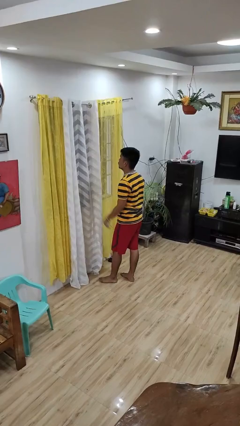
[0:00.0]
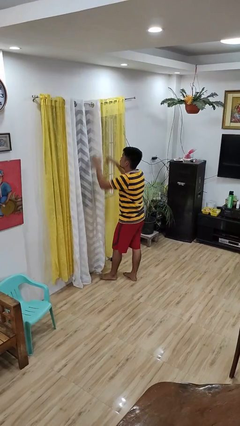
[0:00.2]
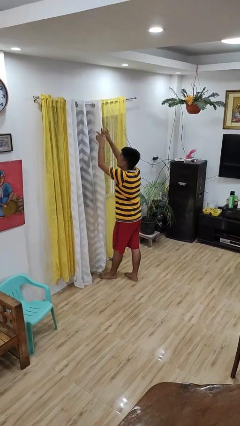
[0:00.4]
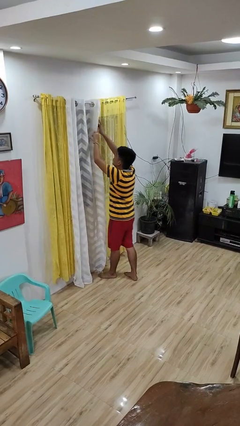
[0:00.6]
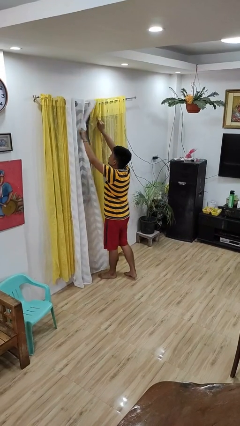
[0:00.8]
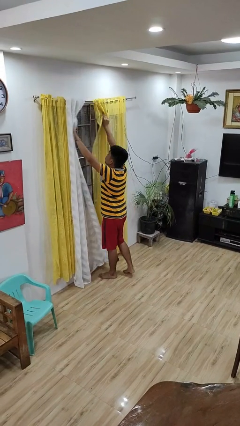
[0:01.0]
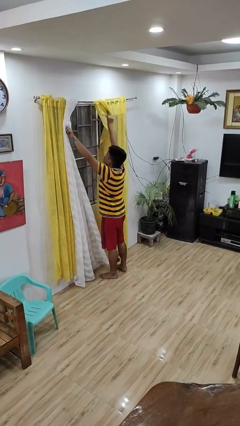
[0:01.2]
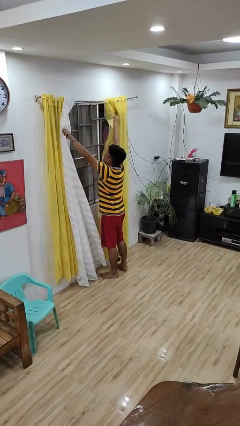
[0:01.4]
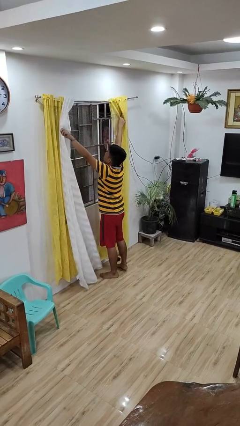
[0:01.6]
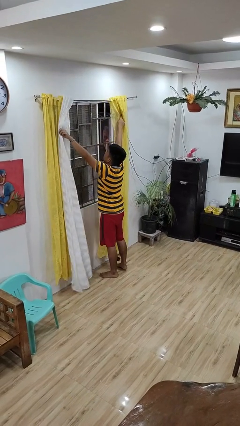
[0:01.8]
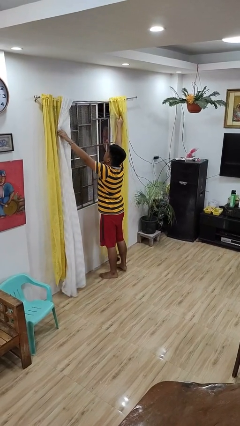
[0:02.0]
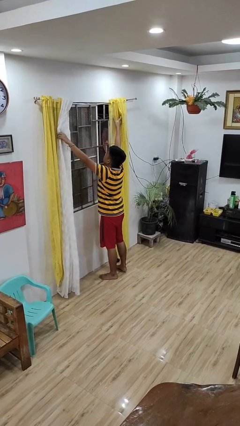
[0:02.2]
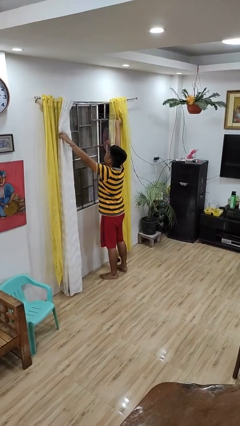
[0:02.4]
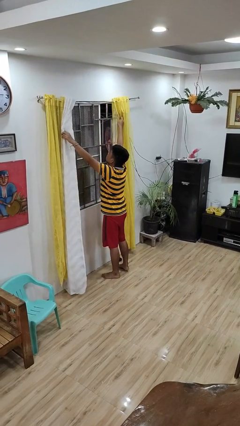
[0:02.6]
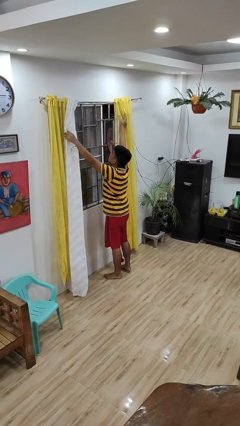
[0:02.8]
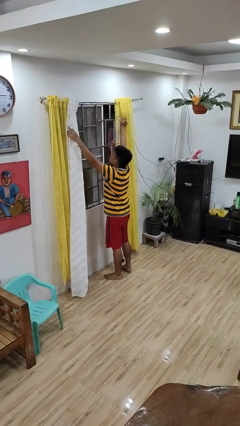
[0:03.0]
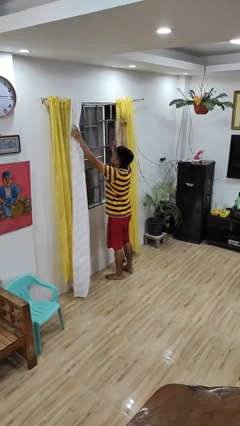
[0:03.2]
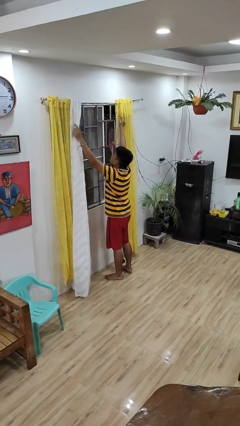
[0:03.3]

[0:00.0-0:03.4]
person opens curtains

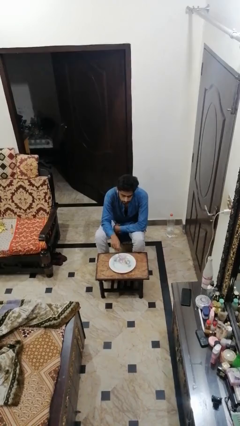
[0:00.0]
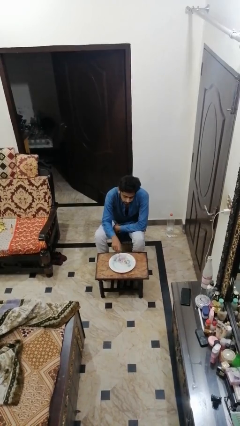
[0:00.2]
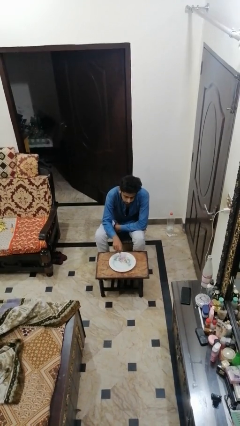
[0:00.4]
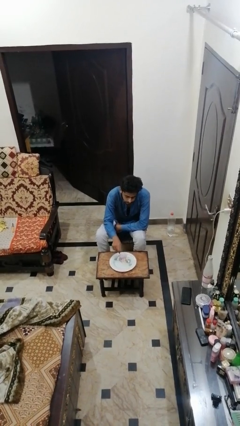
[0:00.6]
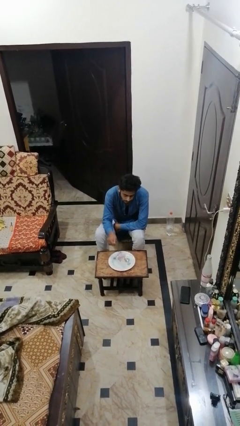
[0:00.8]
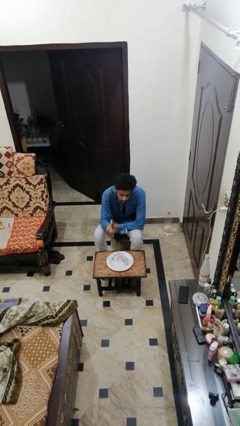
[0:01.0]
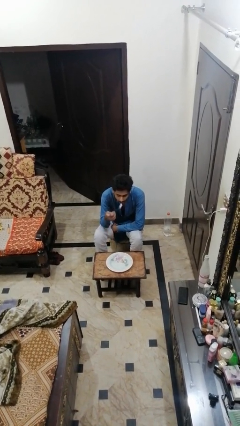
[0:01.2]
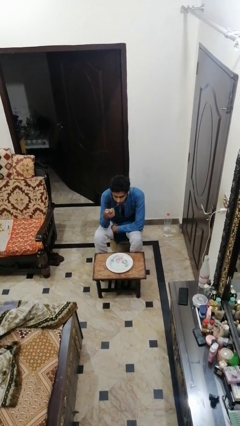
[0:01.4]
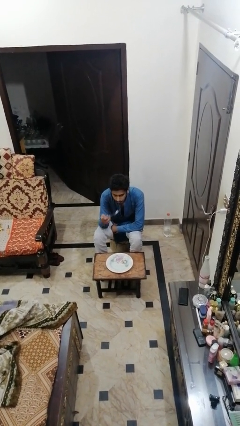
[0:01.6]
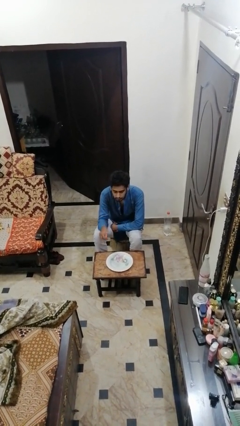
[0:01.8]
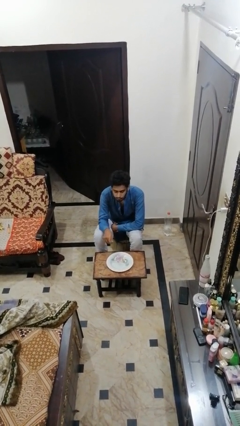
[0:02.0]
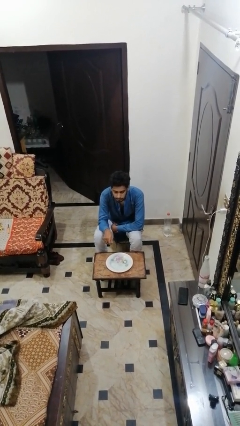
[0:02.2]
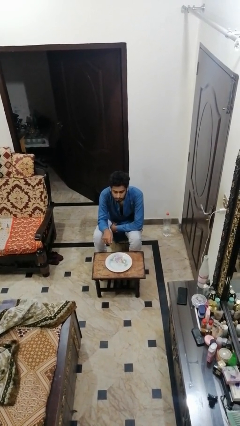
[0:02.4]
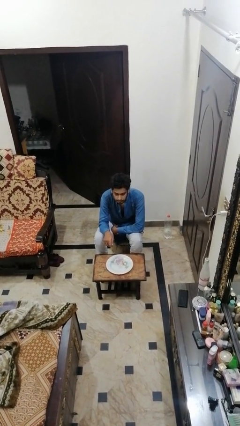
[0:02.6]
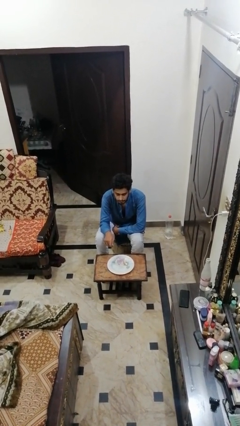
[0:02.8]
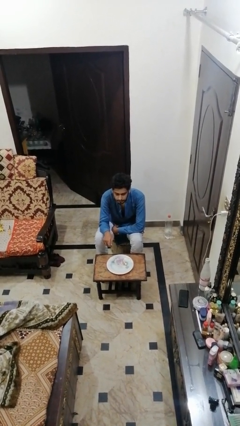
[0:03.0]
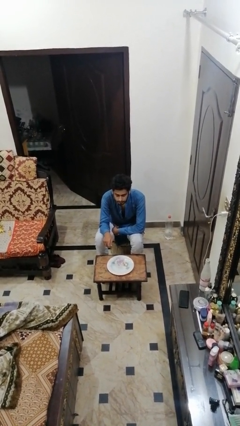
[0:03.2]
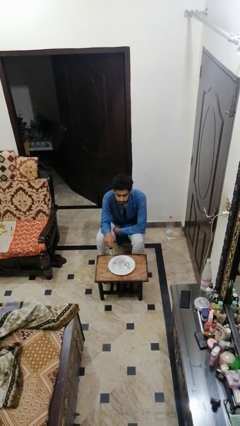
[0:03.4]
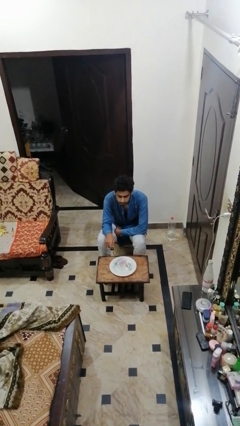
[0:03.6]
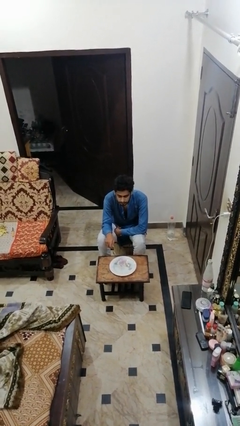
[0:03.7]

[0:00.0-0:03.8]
person eats with utensil

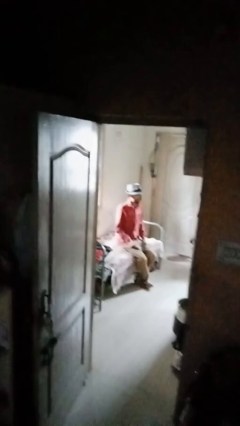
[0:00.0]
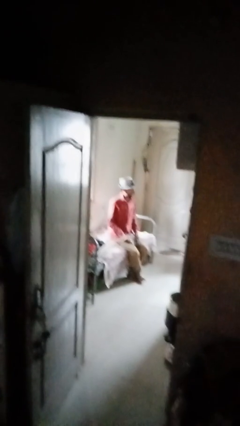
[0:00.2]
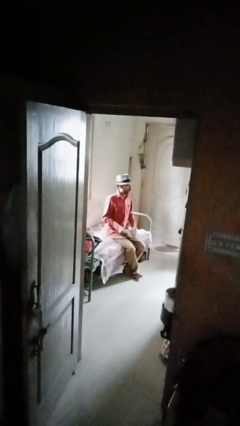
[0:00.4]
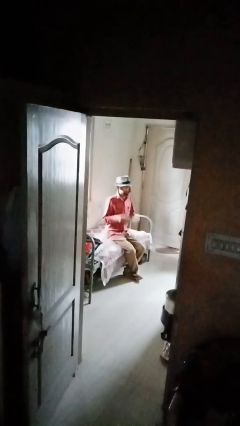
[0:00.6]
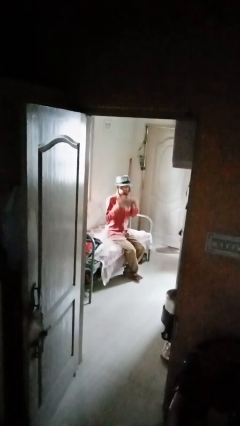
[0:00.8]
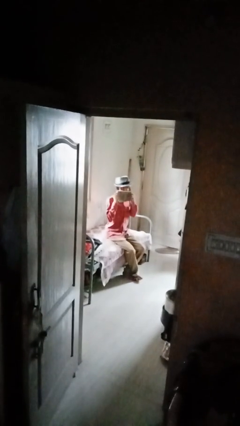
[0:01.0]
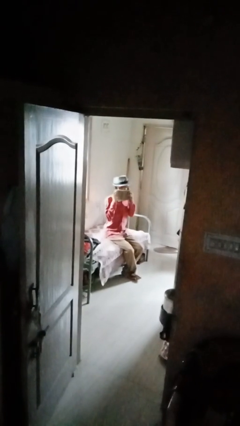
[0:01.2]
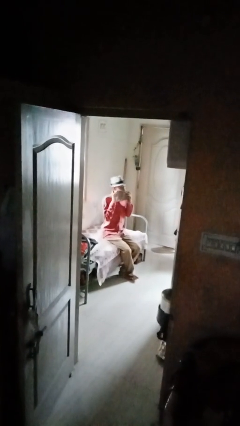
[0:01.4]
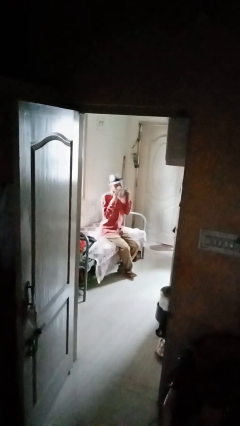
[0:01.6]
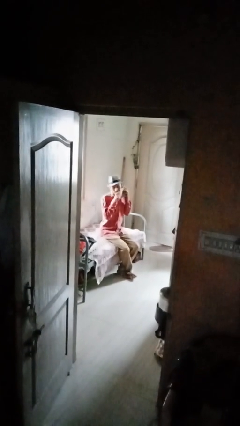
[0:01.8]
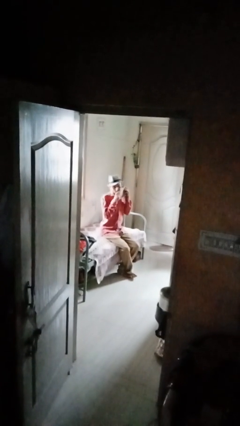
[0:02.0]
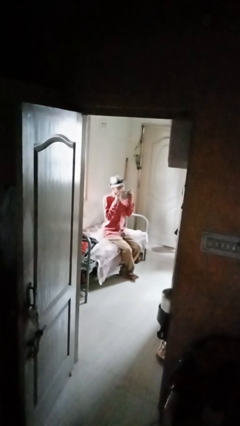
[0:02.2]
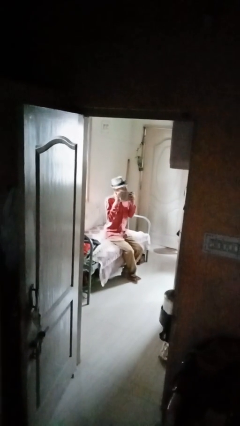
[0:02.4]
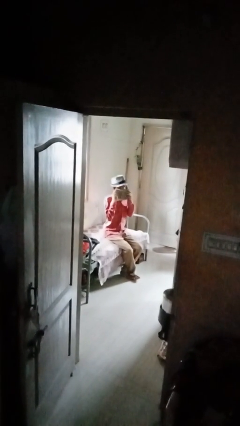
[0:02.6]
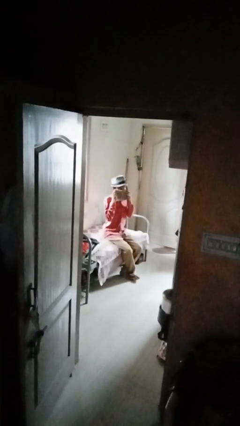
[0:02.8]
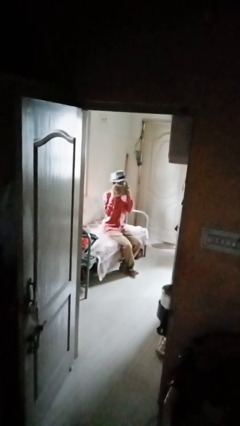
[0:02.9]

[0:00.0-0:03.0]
person wipes mouth with napkin

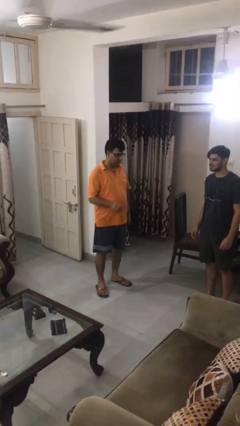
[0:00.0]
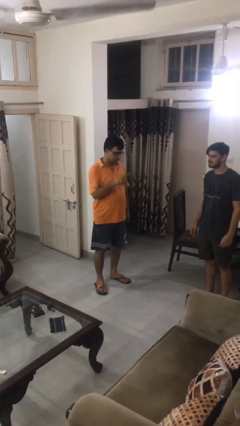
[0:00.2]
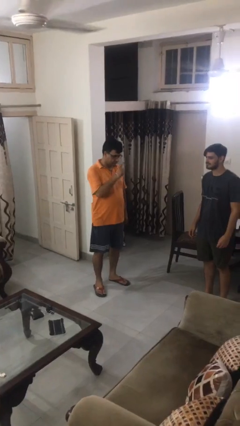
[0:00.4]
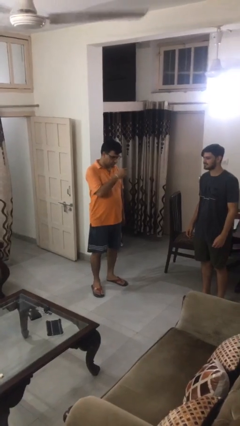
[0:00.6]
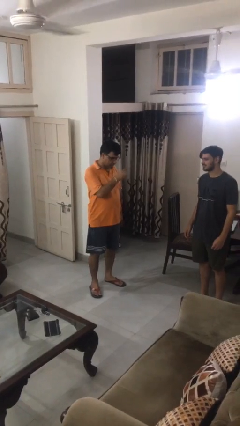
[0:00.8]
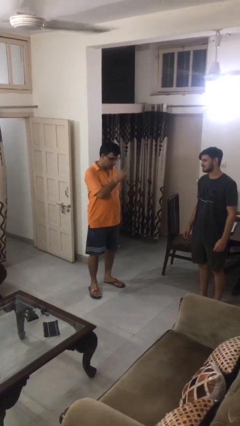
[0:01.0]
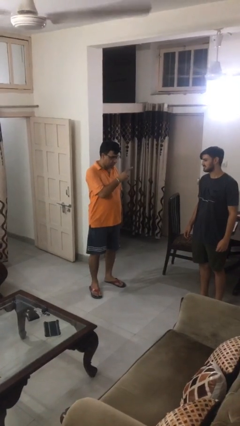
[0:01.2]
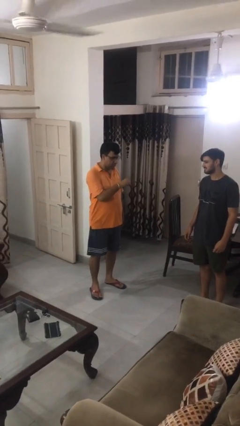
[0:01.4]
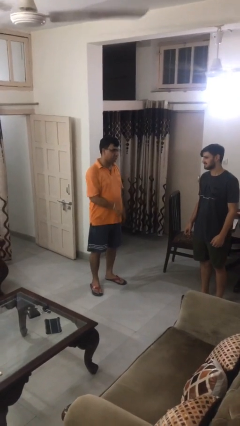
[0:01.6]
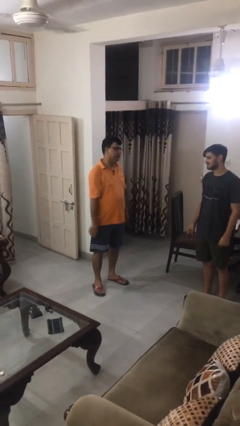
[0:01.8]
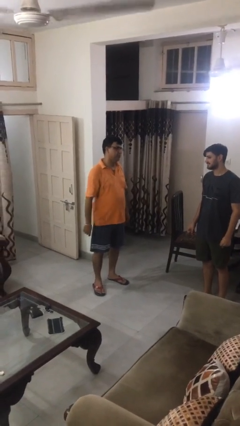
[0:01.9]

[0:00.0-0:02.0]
person points at person

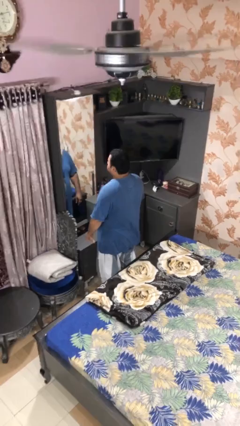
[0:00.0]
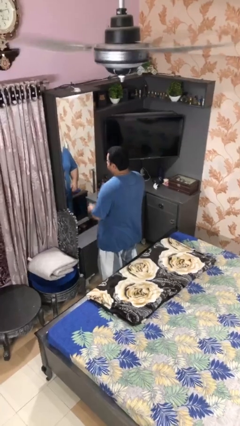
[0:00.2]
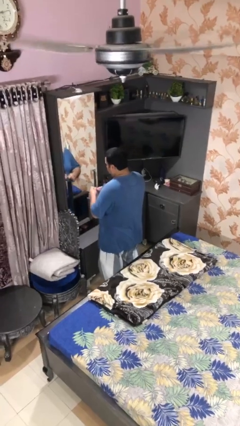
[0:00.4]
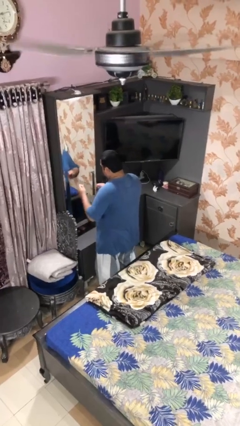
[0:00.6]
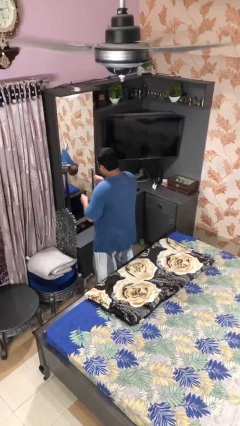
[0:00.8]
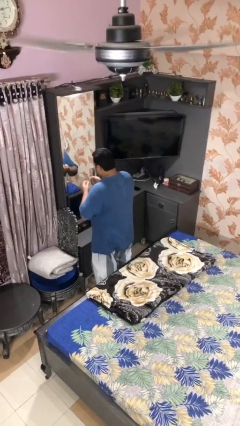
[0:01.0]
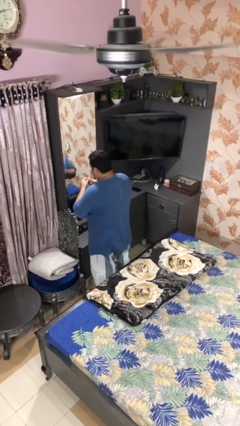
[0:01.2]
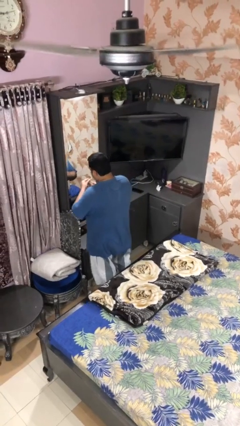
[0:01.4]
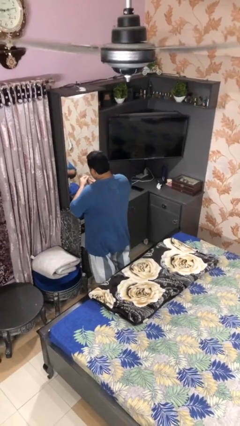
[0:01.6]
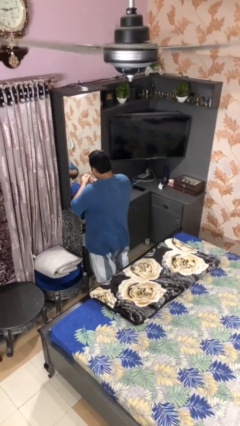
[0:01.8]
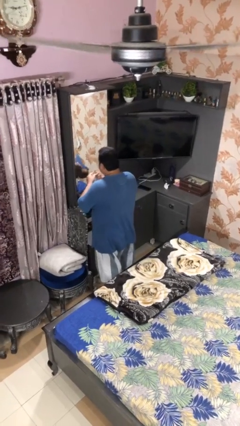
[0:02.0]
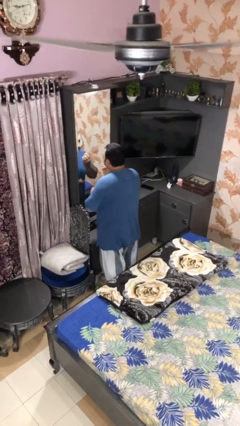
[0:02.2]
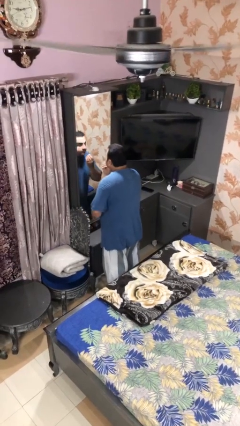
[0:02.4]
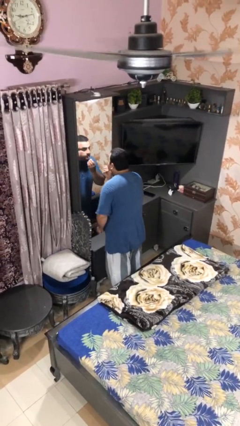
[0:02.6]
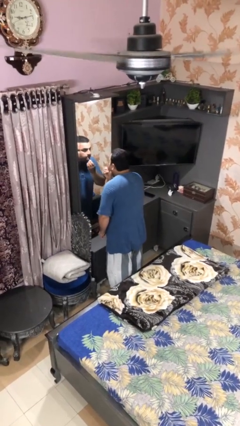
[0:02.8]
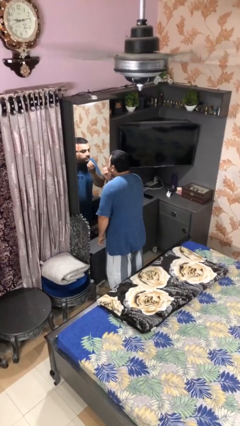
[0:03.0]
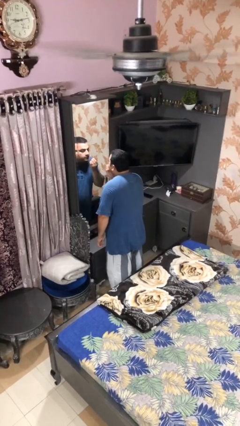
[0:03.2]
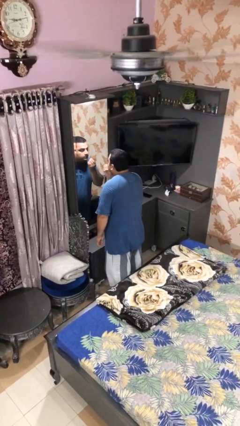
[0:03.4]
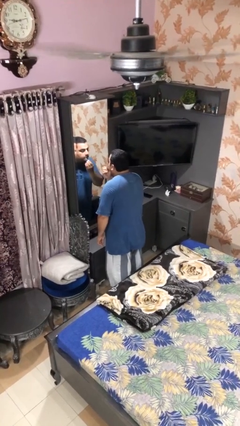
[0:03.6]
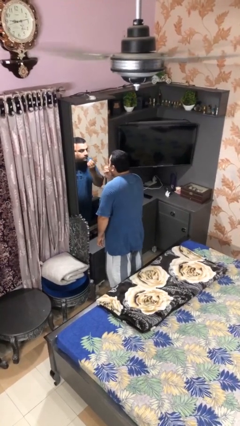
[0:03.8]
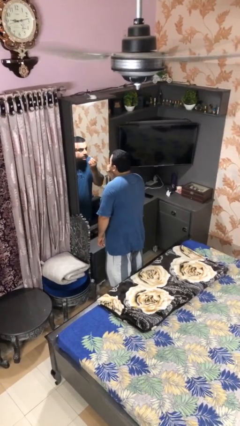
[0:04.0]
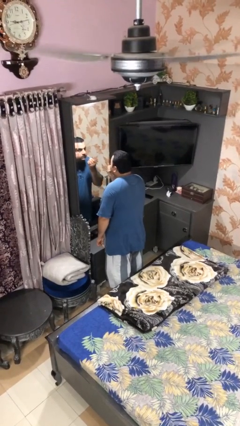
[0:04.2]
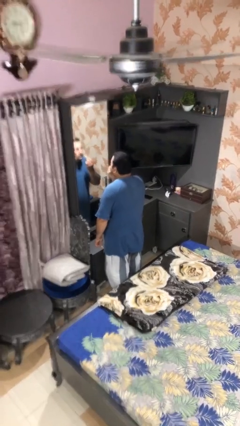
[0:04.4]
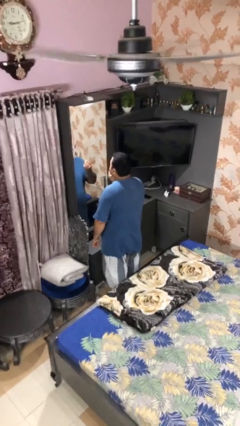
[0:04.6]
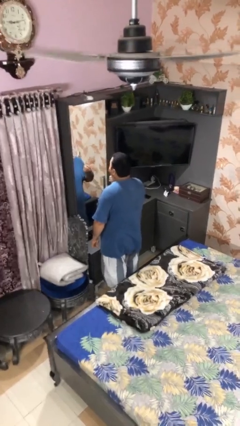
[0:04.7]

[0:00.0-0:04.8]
person applies lip makeup

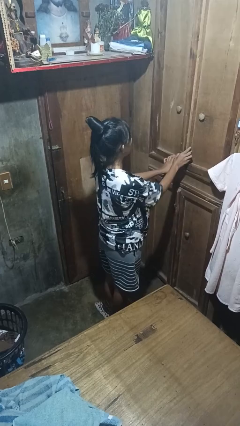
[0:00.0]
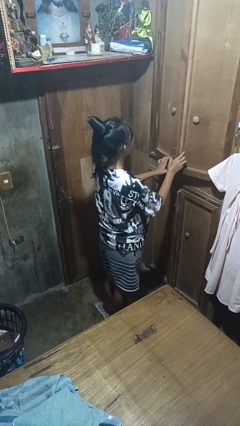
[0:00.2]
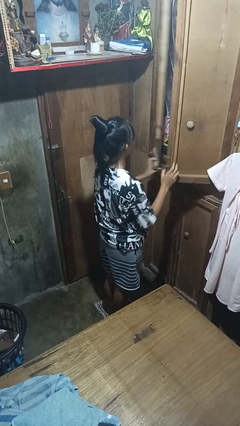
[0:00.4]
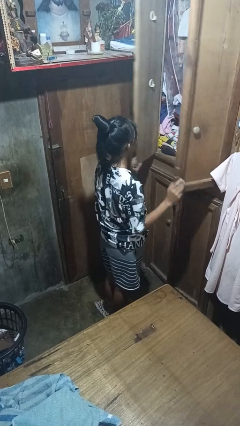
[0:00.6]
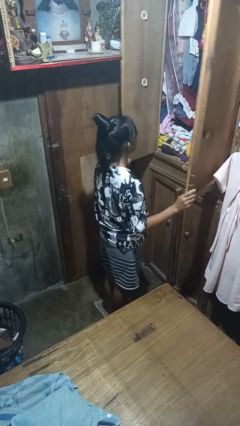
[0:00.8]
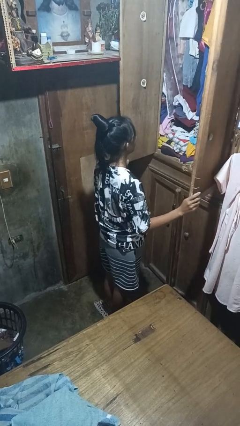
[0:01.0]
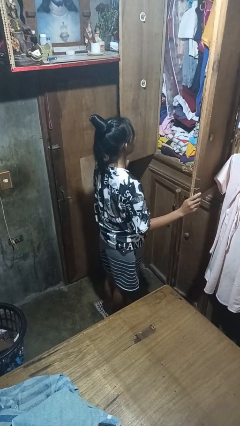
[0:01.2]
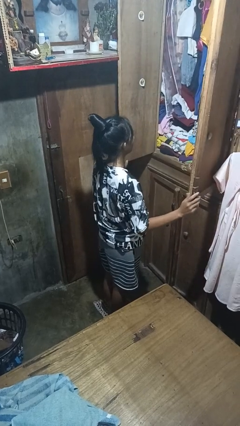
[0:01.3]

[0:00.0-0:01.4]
person opens closet door
